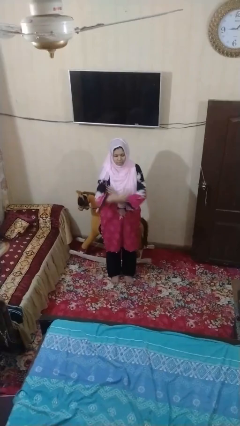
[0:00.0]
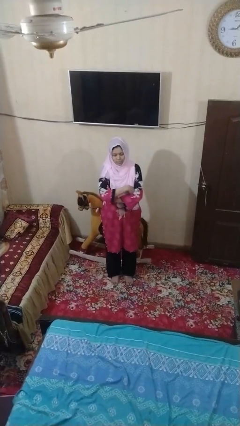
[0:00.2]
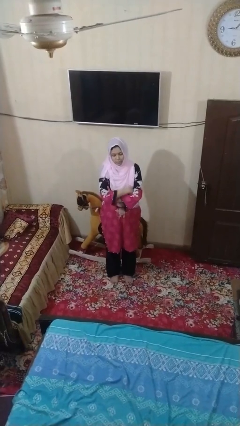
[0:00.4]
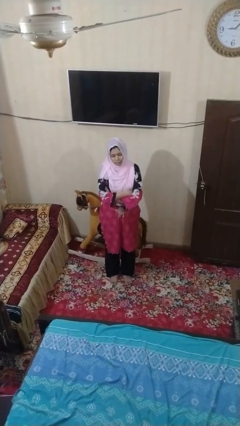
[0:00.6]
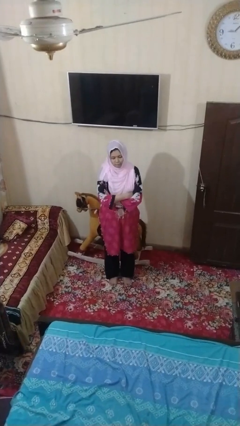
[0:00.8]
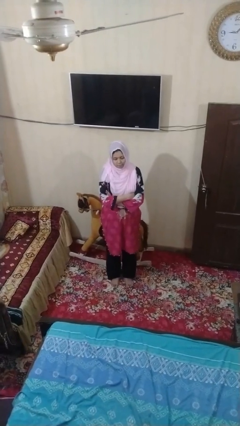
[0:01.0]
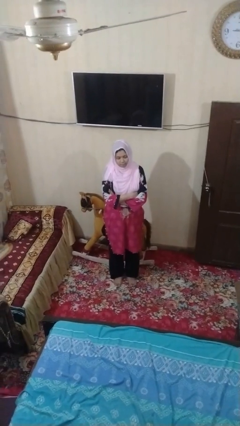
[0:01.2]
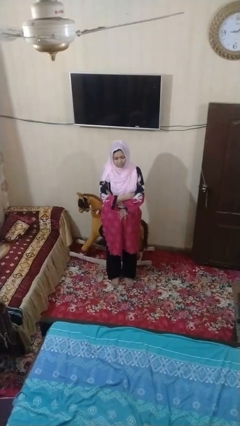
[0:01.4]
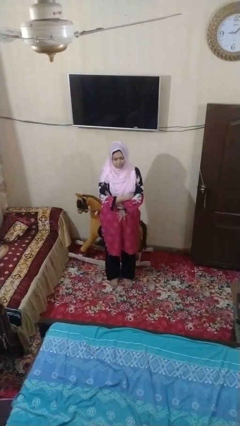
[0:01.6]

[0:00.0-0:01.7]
person crosses arms

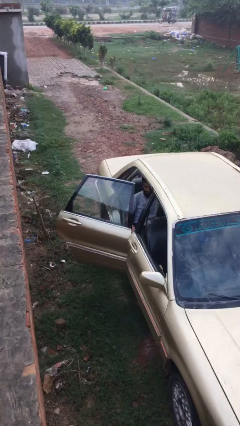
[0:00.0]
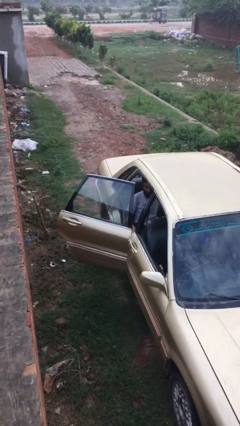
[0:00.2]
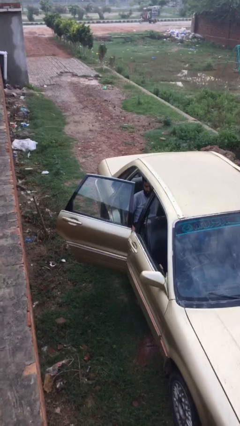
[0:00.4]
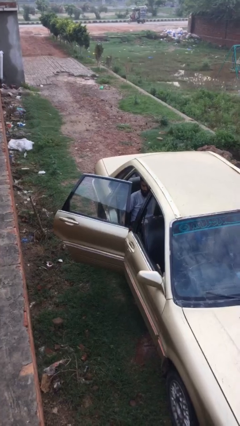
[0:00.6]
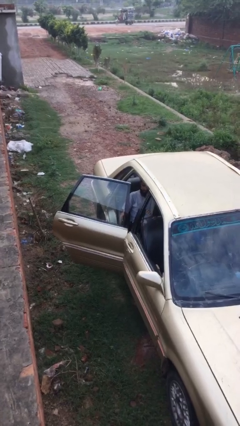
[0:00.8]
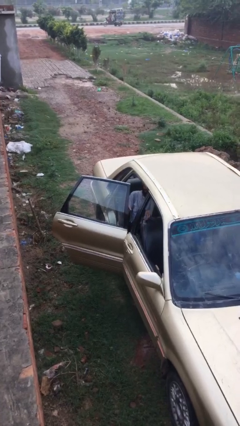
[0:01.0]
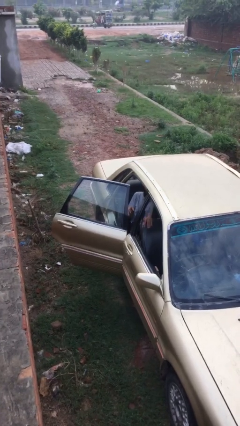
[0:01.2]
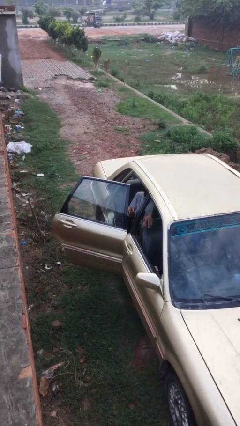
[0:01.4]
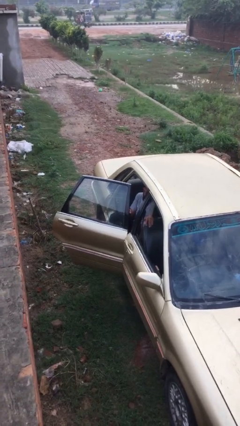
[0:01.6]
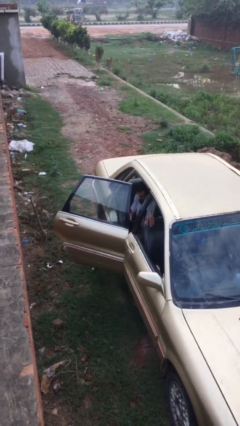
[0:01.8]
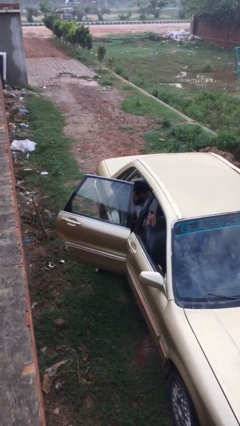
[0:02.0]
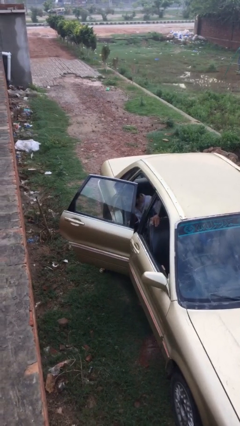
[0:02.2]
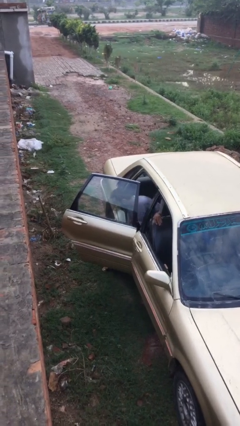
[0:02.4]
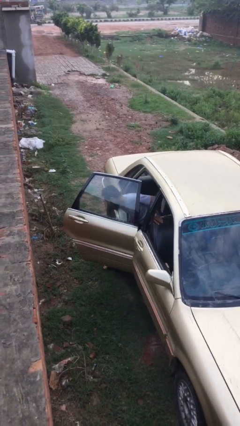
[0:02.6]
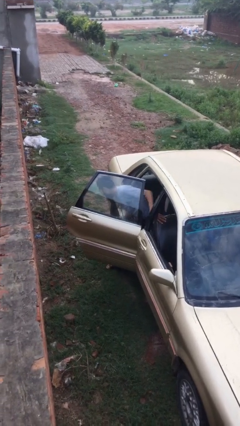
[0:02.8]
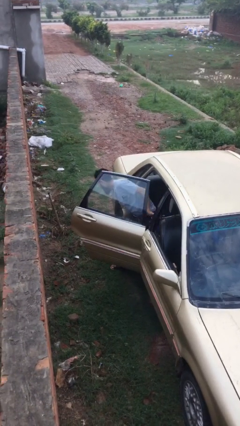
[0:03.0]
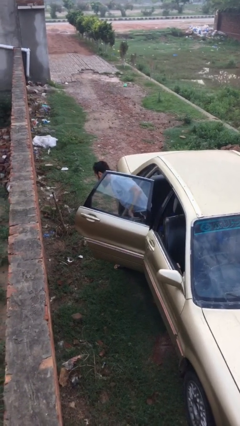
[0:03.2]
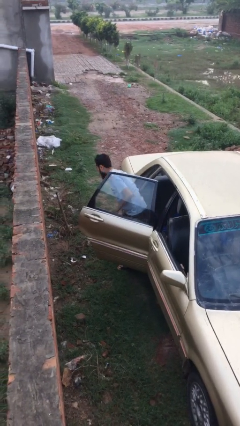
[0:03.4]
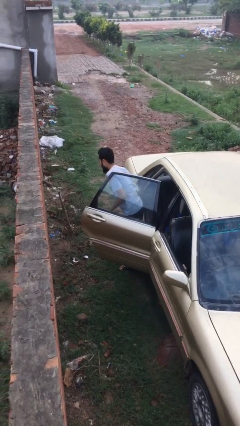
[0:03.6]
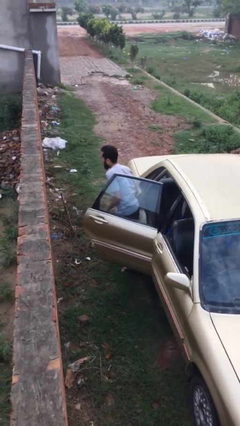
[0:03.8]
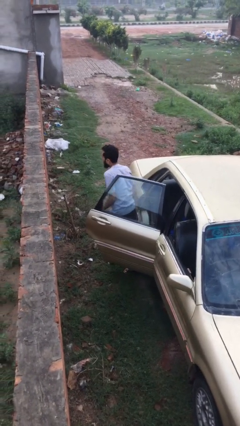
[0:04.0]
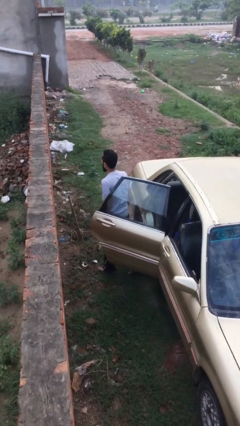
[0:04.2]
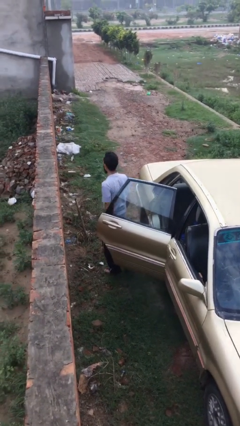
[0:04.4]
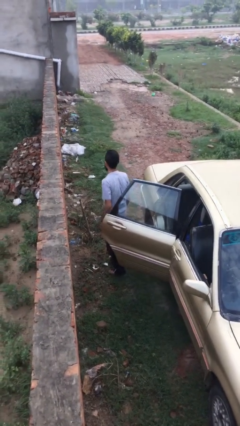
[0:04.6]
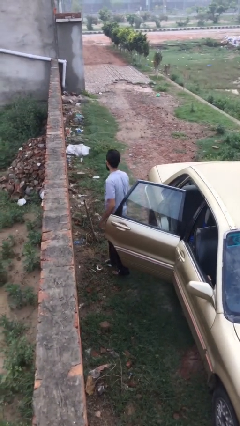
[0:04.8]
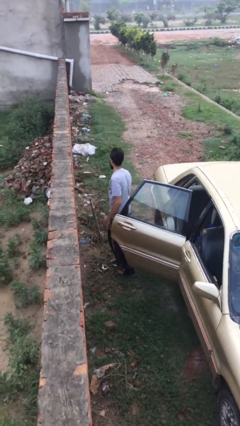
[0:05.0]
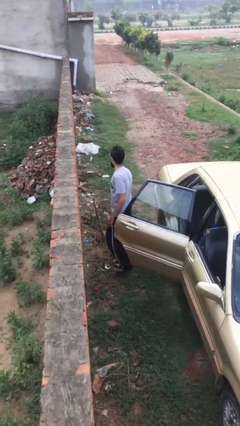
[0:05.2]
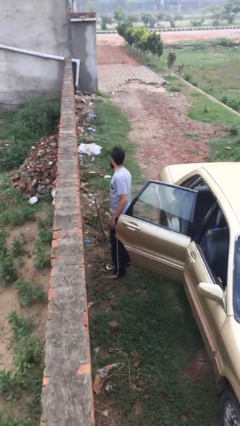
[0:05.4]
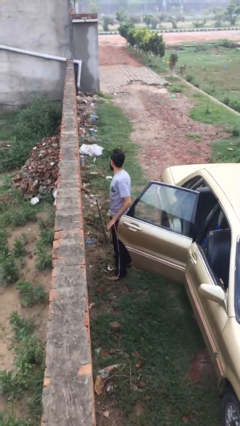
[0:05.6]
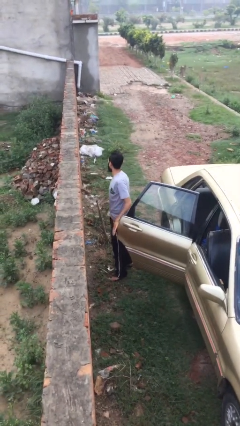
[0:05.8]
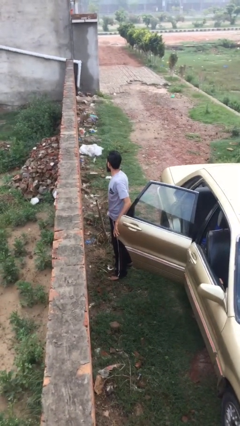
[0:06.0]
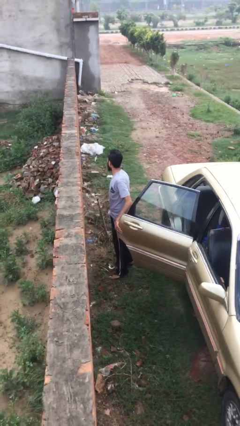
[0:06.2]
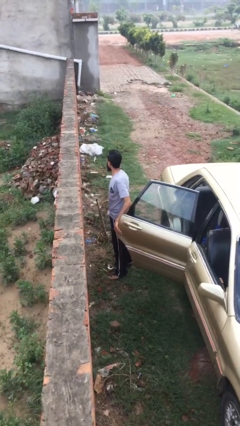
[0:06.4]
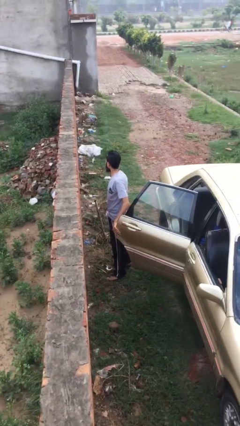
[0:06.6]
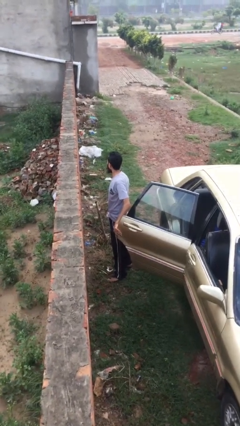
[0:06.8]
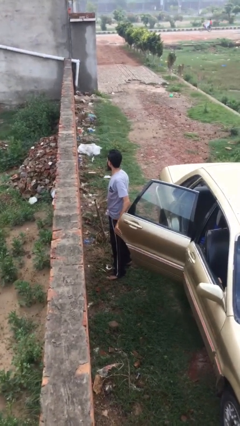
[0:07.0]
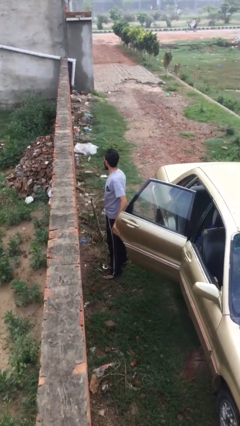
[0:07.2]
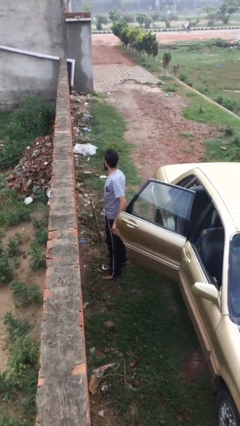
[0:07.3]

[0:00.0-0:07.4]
person exits car

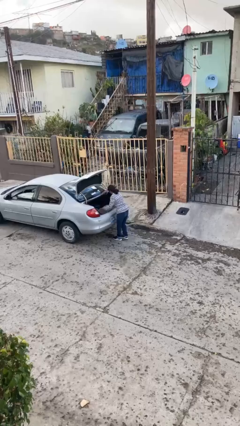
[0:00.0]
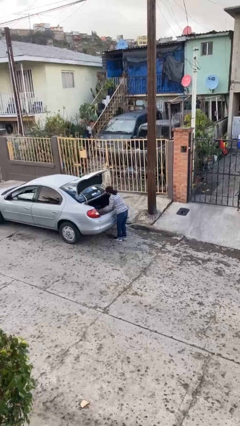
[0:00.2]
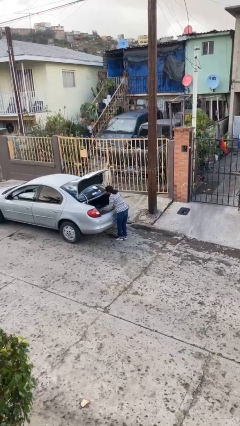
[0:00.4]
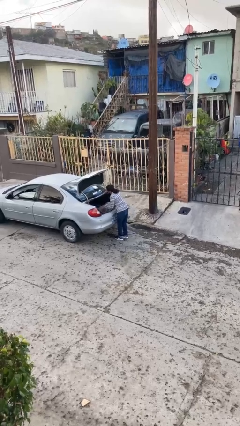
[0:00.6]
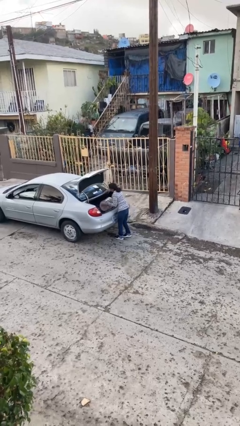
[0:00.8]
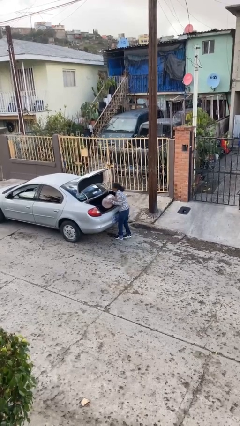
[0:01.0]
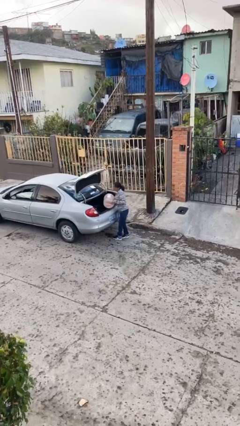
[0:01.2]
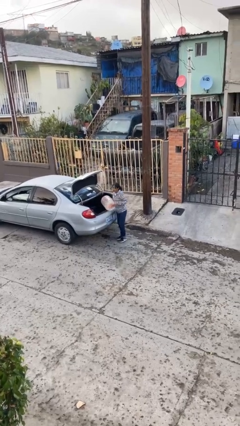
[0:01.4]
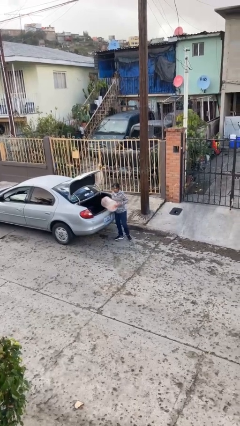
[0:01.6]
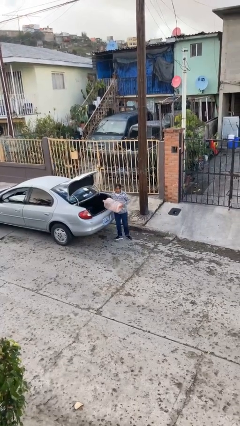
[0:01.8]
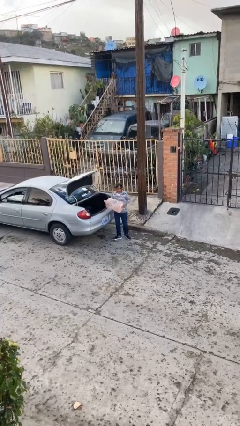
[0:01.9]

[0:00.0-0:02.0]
person unloads car

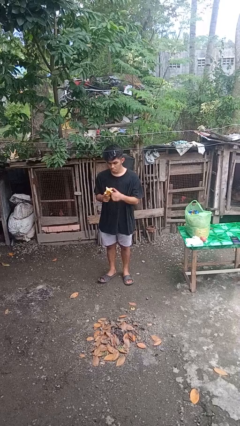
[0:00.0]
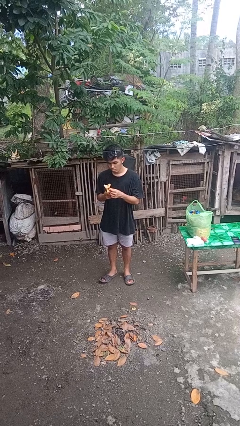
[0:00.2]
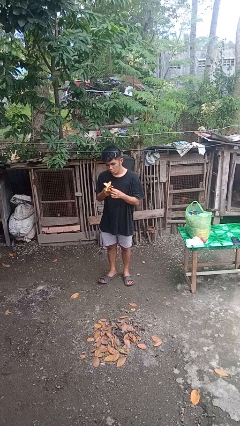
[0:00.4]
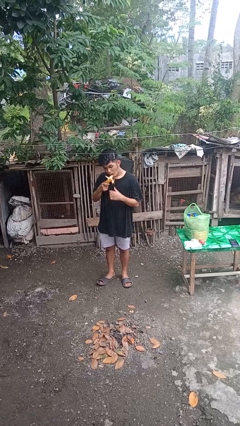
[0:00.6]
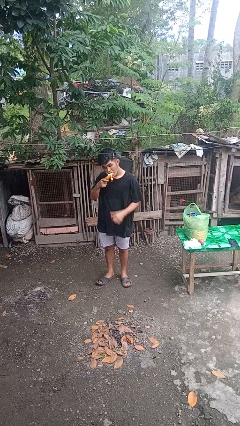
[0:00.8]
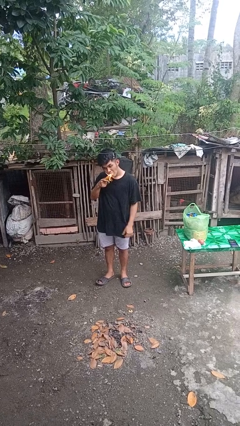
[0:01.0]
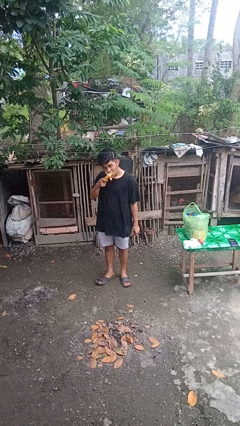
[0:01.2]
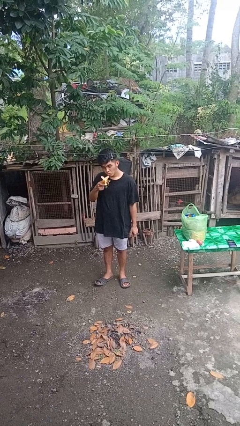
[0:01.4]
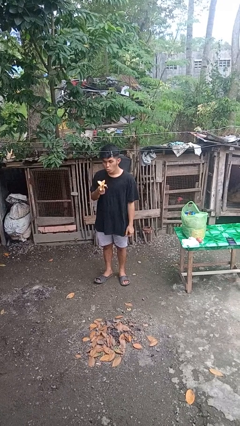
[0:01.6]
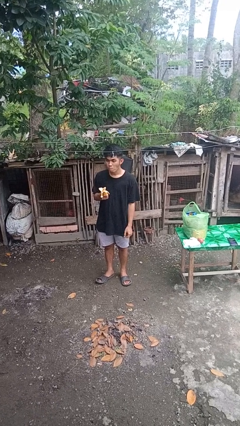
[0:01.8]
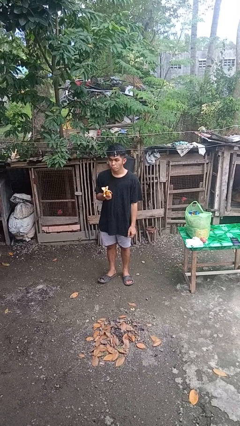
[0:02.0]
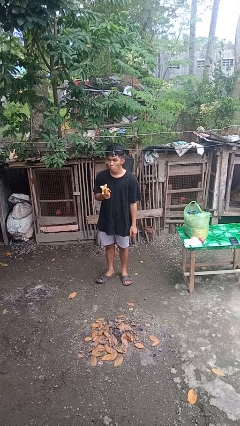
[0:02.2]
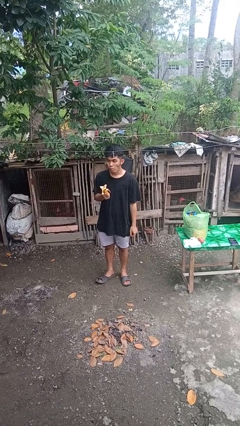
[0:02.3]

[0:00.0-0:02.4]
person eats banana

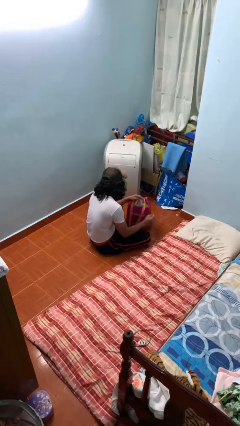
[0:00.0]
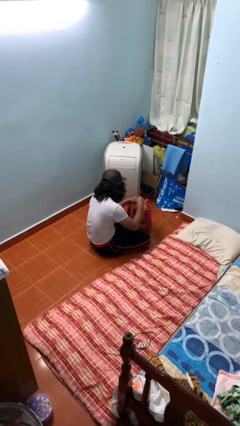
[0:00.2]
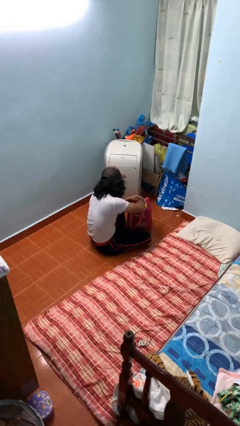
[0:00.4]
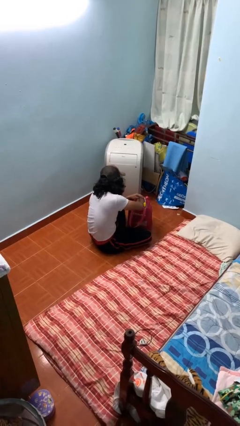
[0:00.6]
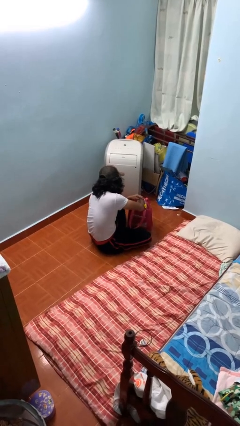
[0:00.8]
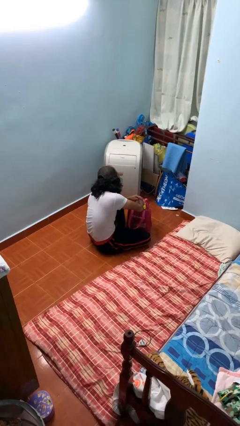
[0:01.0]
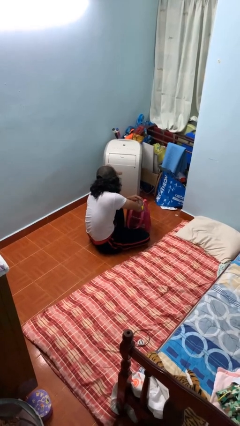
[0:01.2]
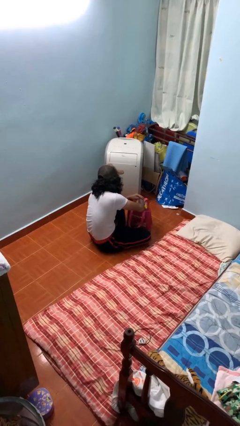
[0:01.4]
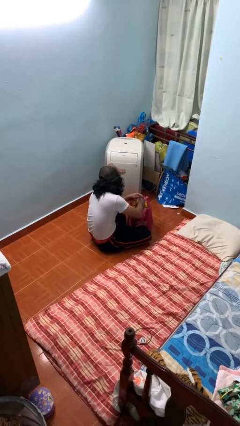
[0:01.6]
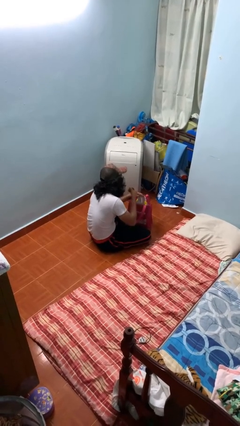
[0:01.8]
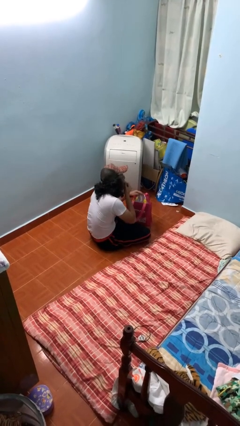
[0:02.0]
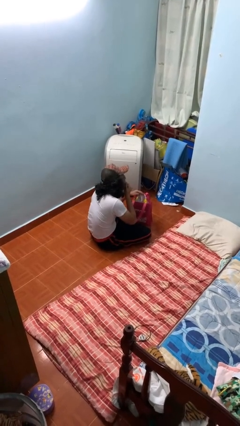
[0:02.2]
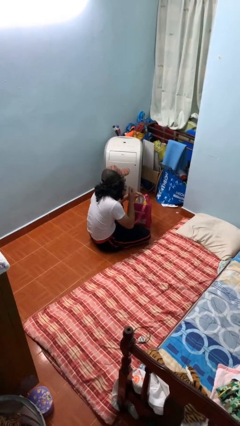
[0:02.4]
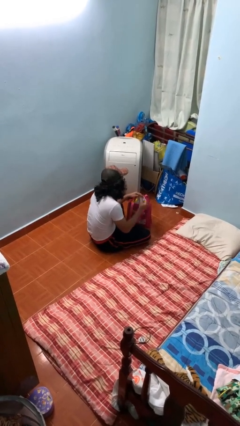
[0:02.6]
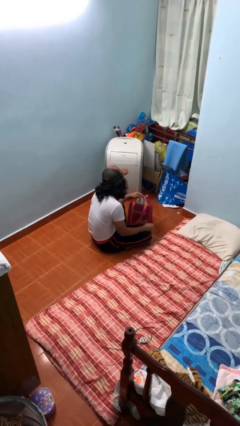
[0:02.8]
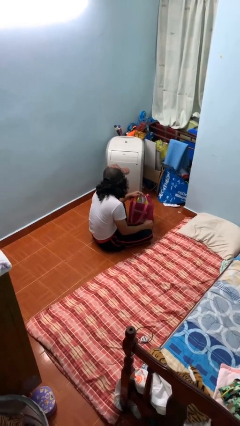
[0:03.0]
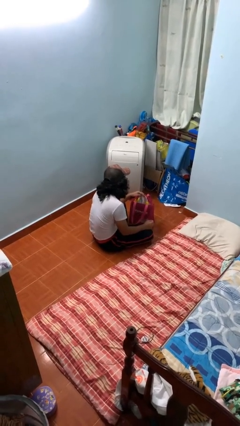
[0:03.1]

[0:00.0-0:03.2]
person eats snack from bag

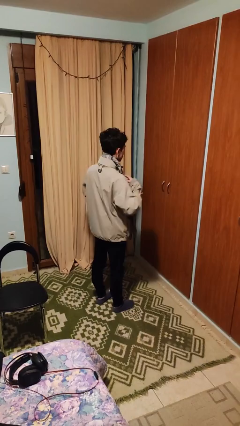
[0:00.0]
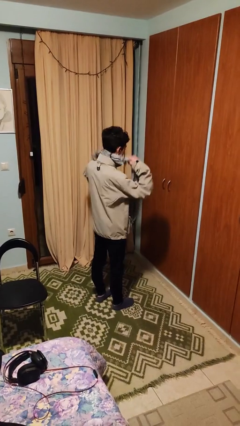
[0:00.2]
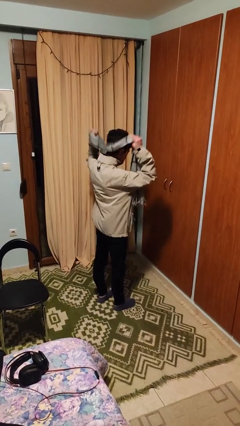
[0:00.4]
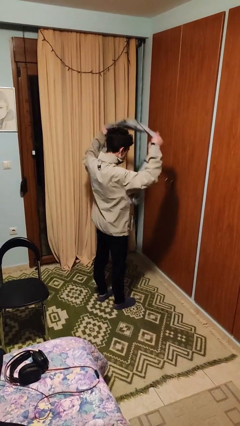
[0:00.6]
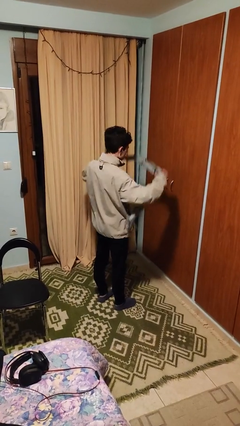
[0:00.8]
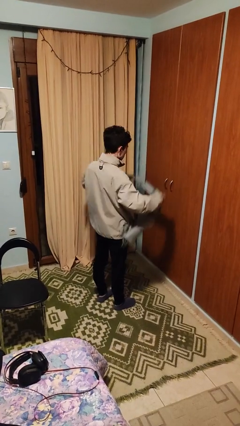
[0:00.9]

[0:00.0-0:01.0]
person takes off scarf
